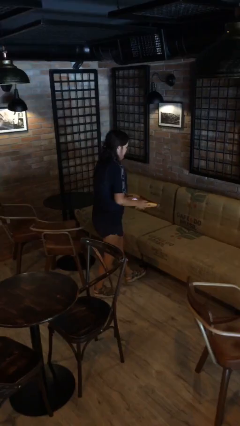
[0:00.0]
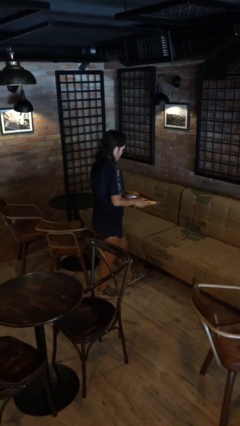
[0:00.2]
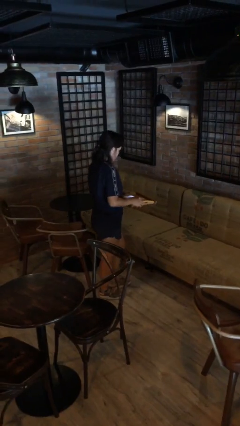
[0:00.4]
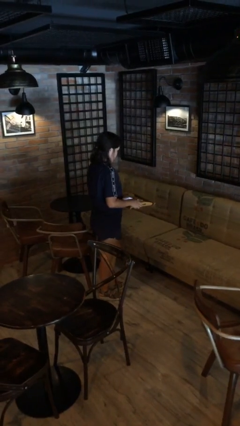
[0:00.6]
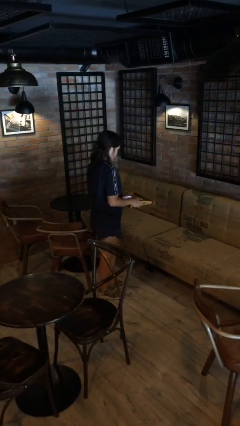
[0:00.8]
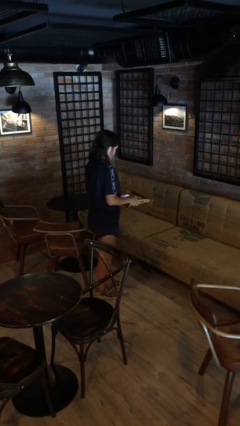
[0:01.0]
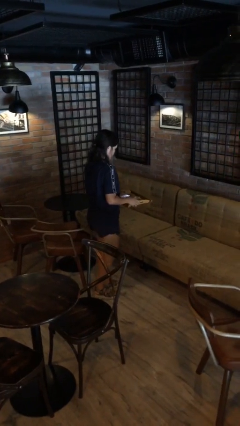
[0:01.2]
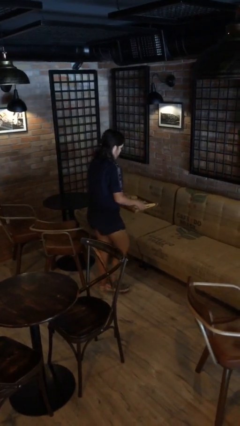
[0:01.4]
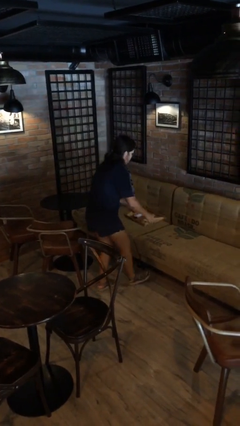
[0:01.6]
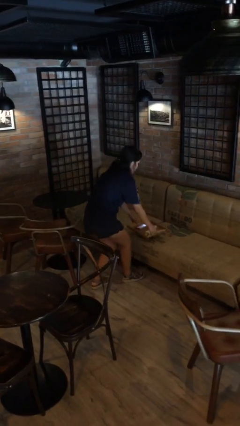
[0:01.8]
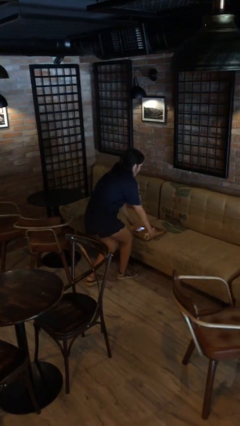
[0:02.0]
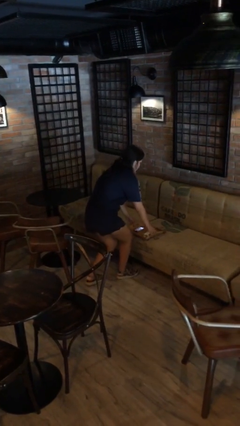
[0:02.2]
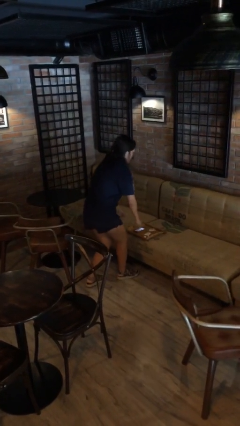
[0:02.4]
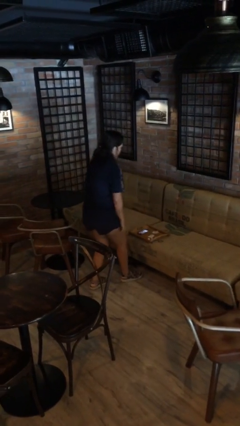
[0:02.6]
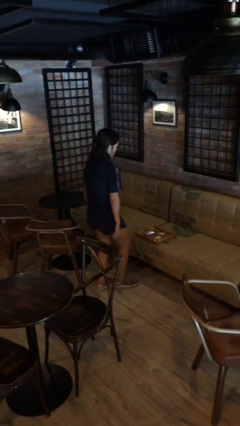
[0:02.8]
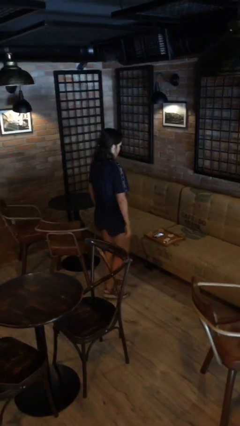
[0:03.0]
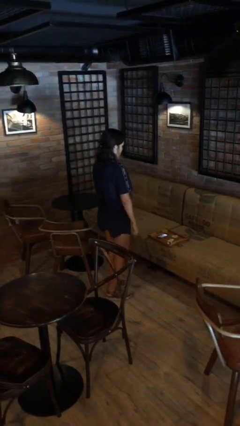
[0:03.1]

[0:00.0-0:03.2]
person puts down object on couch

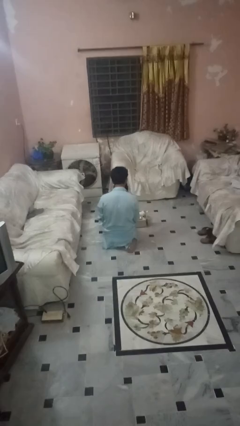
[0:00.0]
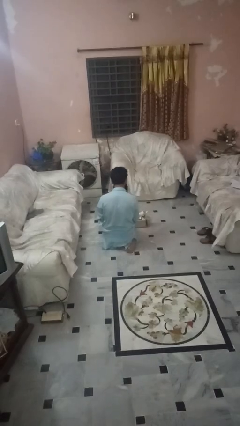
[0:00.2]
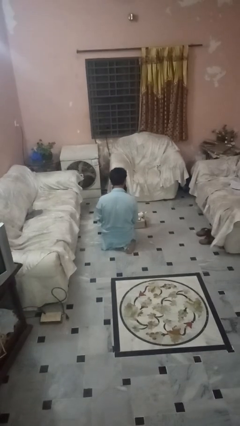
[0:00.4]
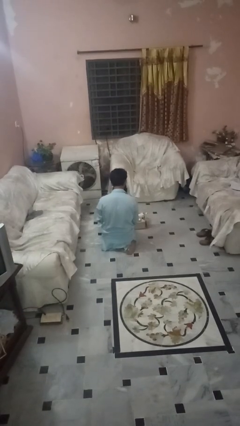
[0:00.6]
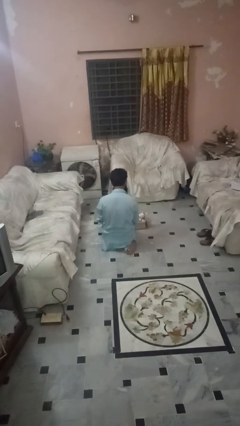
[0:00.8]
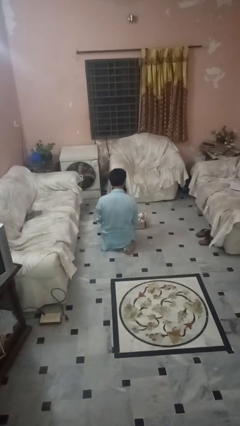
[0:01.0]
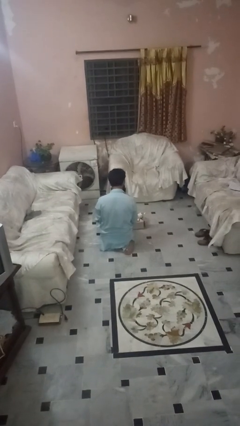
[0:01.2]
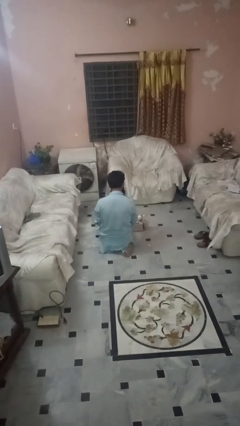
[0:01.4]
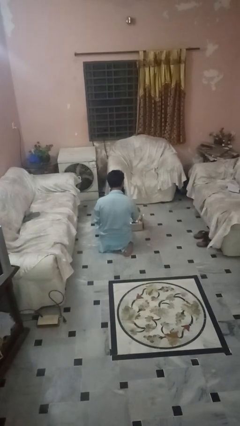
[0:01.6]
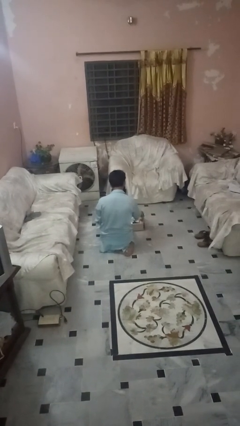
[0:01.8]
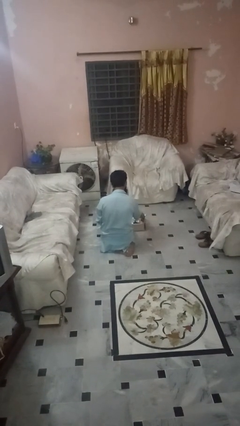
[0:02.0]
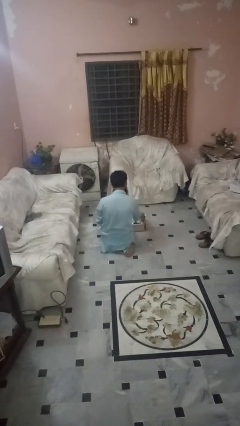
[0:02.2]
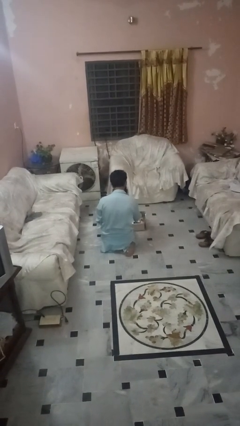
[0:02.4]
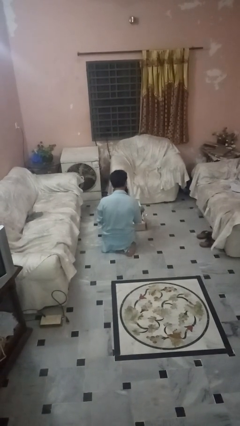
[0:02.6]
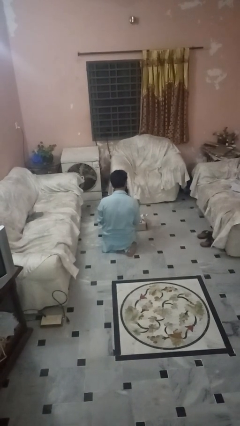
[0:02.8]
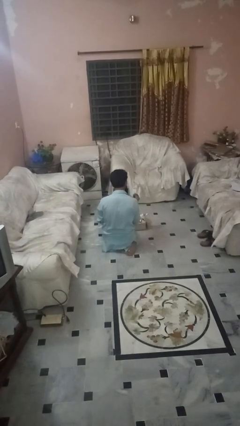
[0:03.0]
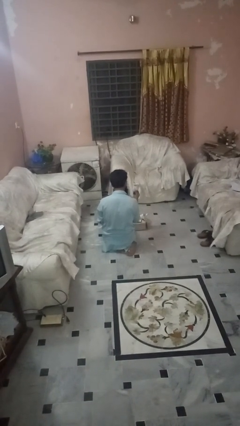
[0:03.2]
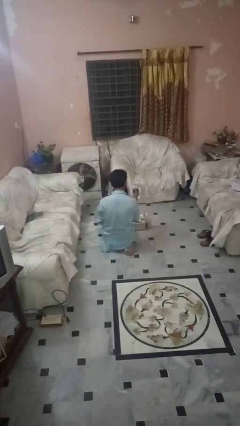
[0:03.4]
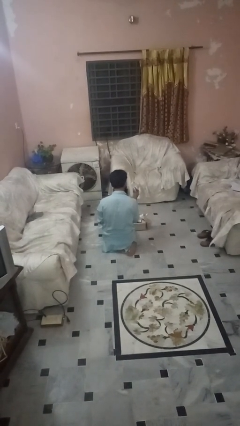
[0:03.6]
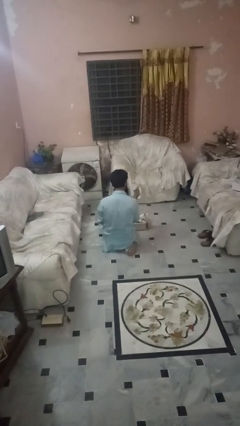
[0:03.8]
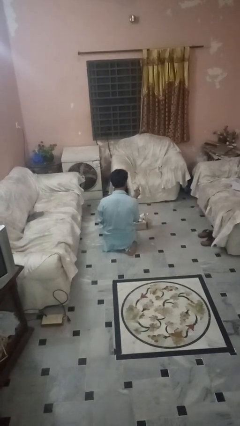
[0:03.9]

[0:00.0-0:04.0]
person takes object from box

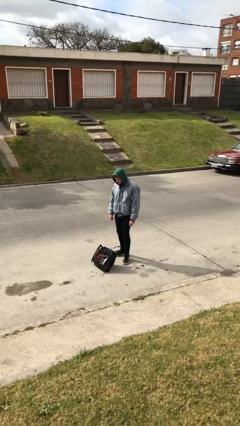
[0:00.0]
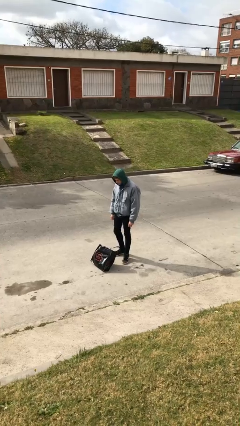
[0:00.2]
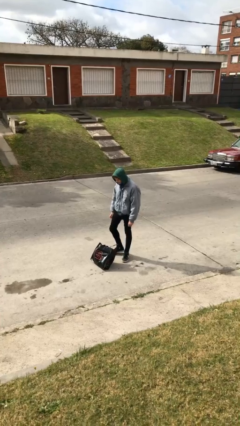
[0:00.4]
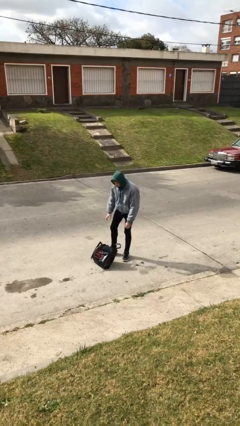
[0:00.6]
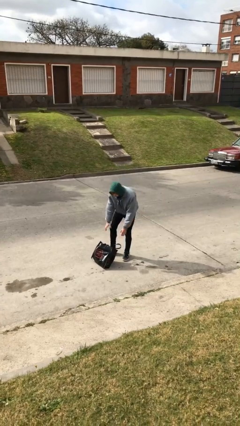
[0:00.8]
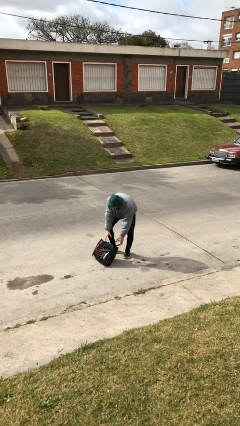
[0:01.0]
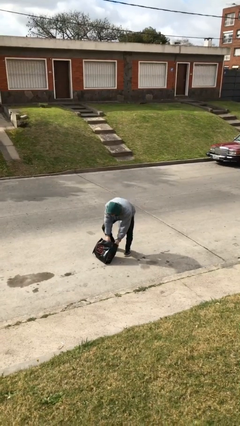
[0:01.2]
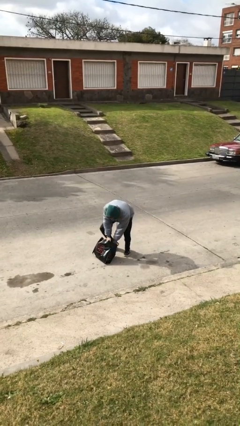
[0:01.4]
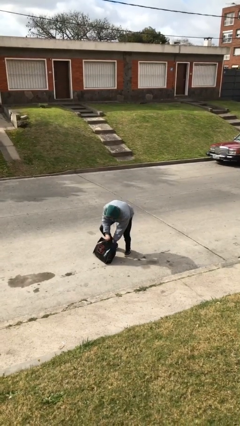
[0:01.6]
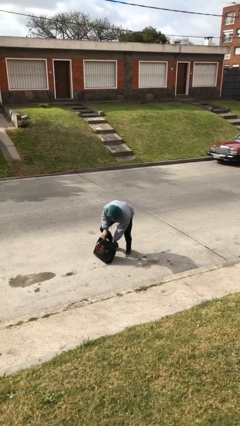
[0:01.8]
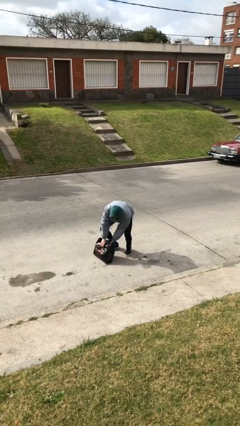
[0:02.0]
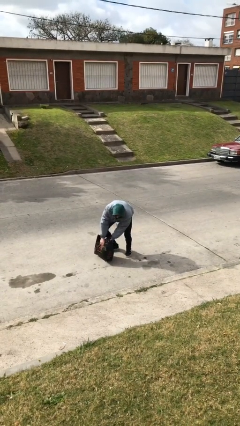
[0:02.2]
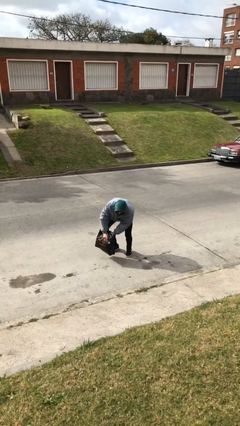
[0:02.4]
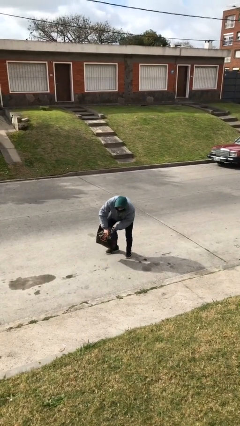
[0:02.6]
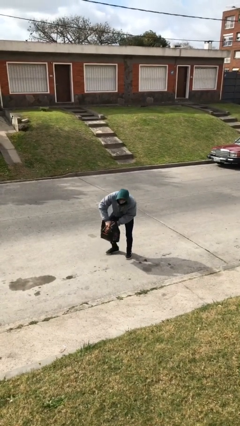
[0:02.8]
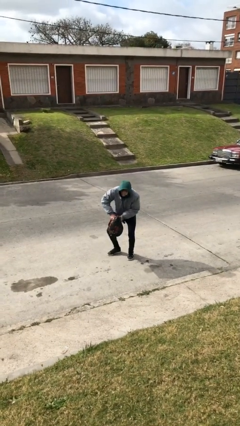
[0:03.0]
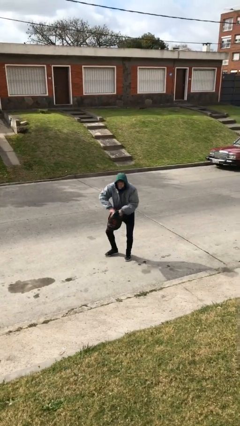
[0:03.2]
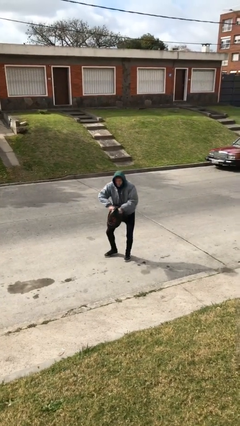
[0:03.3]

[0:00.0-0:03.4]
person picks up object from floor

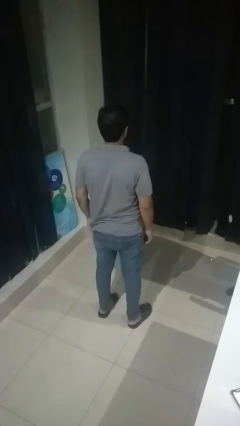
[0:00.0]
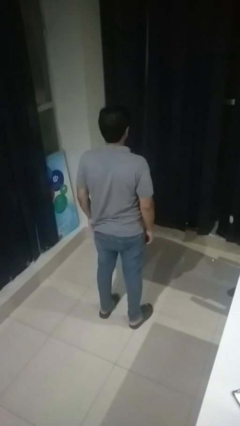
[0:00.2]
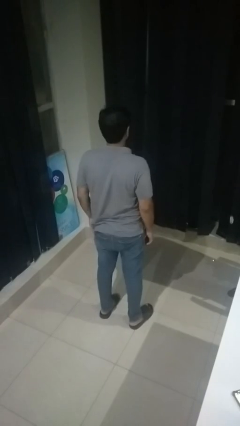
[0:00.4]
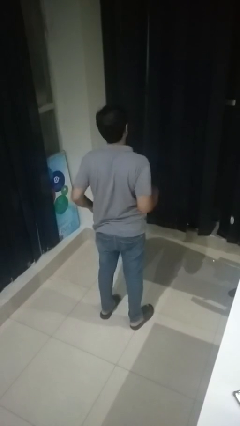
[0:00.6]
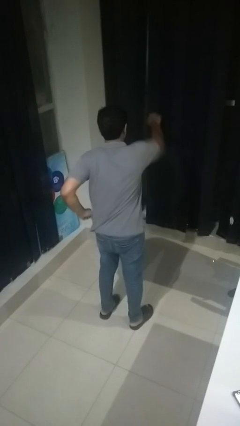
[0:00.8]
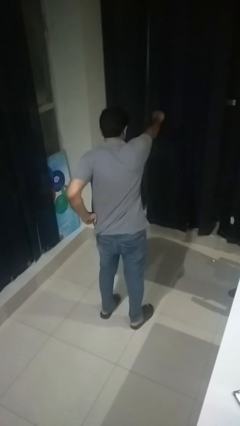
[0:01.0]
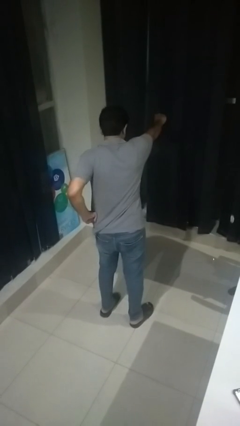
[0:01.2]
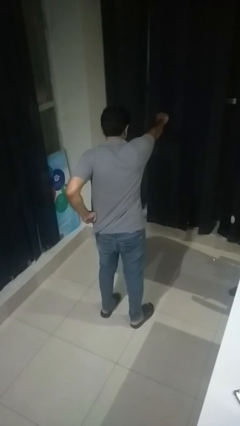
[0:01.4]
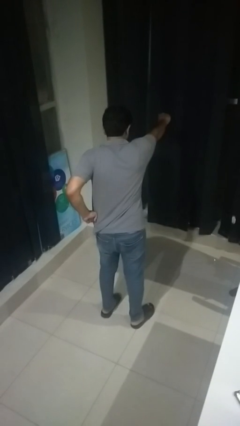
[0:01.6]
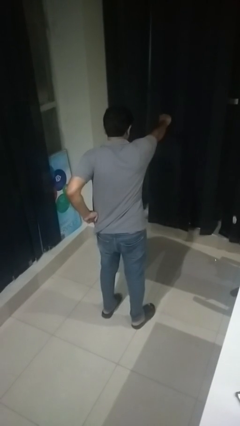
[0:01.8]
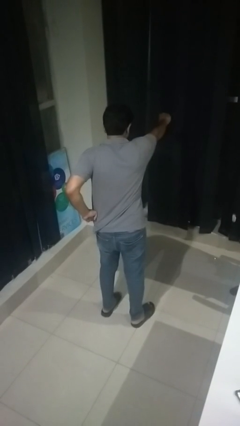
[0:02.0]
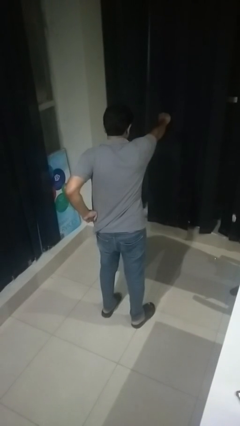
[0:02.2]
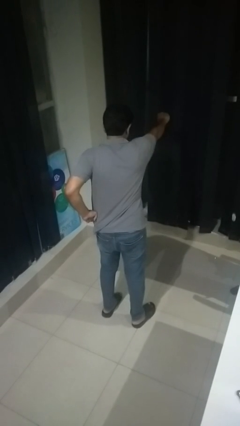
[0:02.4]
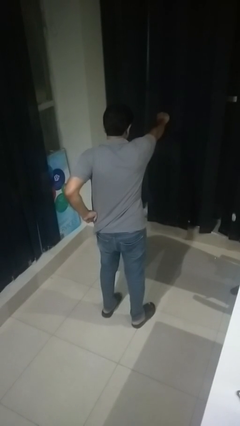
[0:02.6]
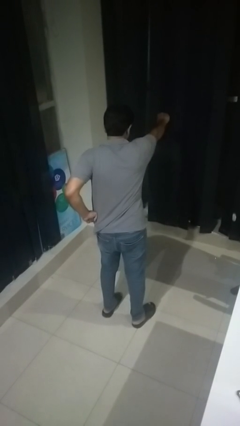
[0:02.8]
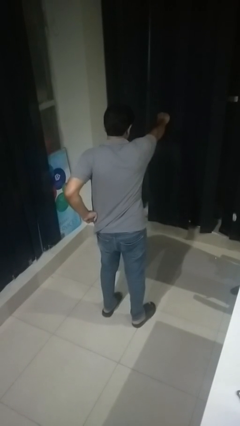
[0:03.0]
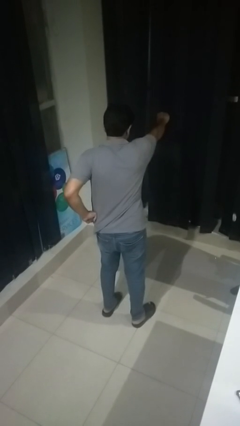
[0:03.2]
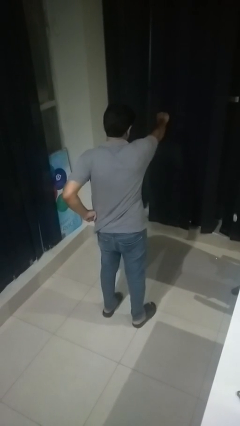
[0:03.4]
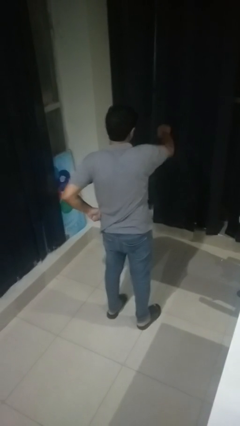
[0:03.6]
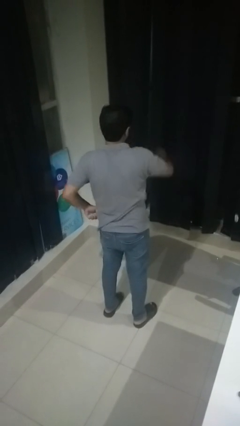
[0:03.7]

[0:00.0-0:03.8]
person punches

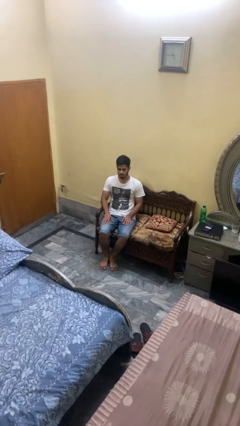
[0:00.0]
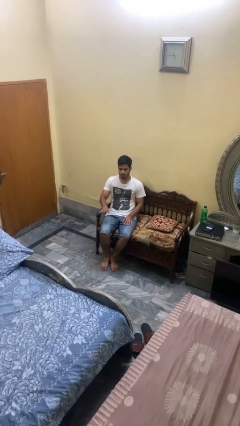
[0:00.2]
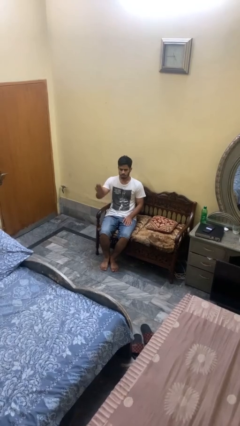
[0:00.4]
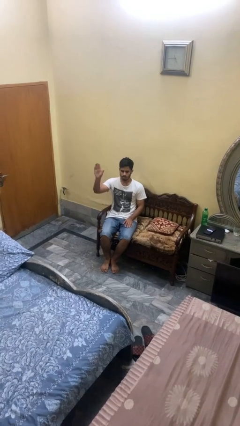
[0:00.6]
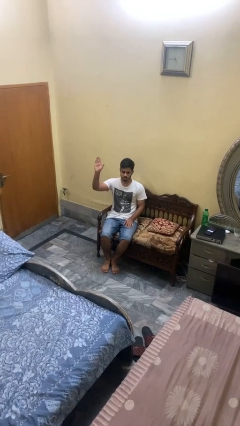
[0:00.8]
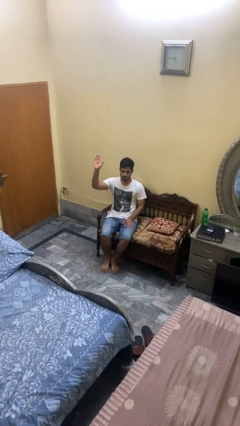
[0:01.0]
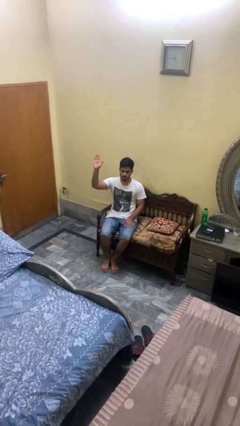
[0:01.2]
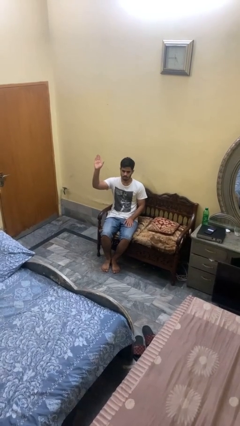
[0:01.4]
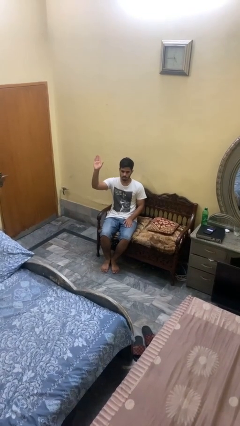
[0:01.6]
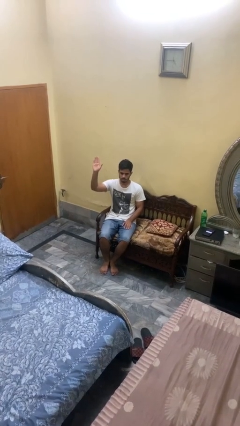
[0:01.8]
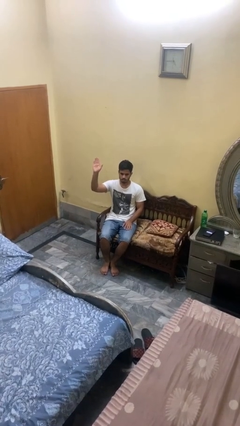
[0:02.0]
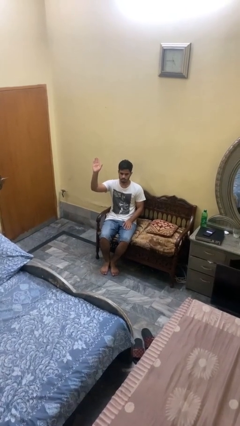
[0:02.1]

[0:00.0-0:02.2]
person gestures raise hand

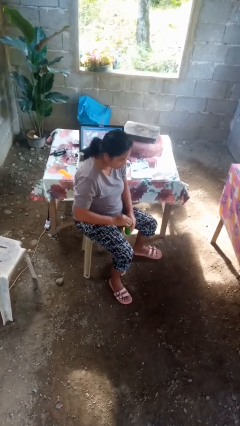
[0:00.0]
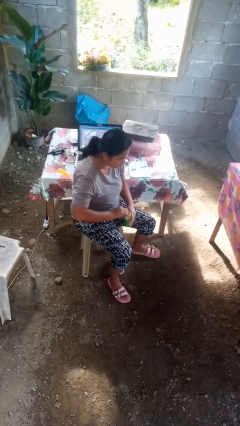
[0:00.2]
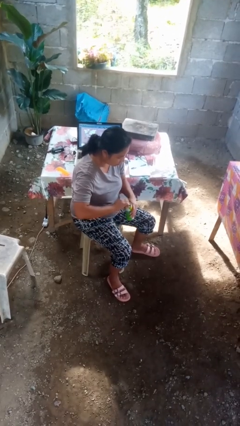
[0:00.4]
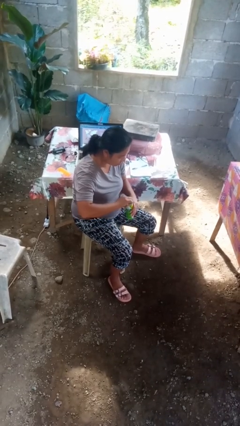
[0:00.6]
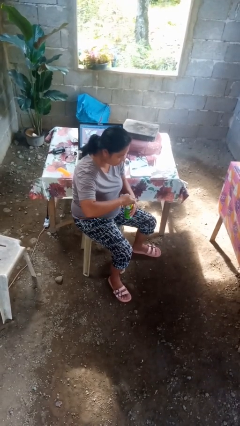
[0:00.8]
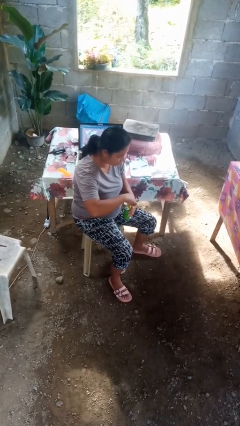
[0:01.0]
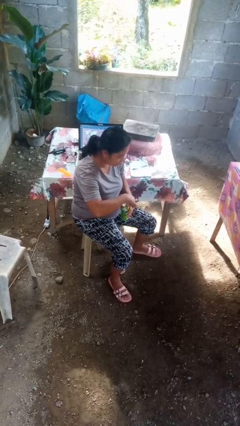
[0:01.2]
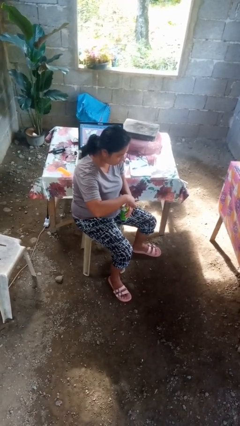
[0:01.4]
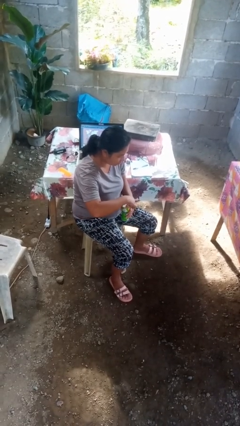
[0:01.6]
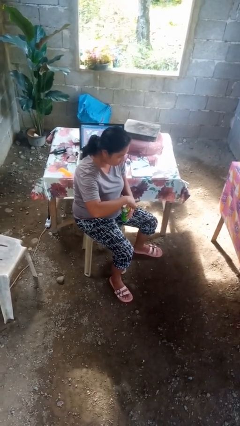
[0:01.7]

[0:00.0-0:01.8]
person opens beverage can
